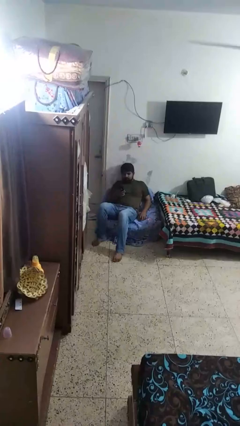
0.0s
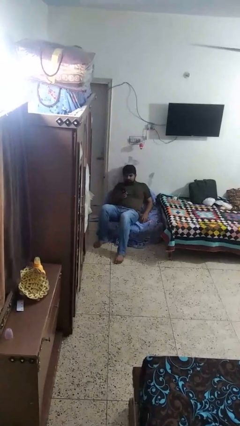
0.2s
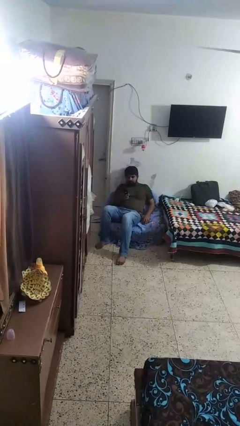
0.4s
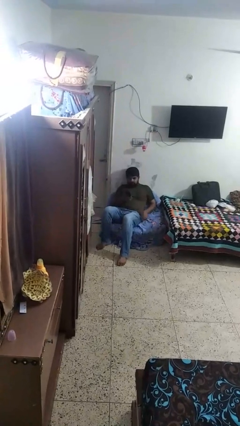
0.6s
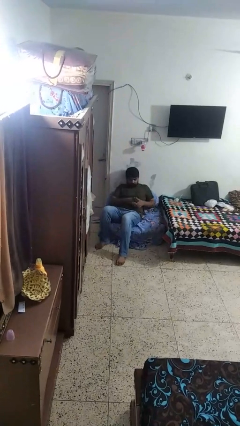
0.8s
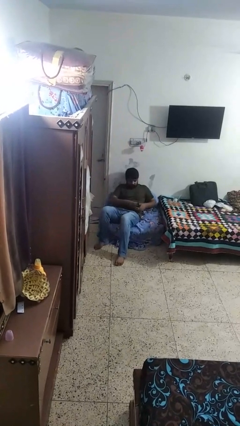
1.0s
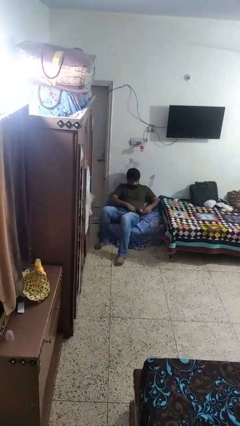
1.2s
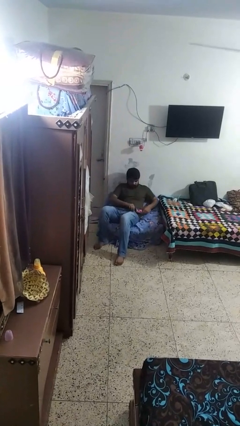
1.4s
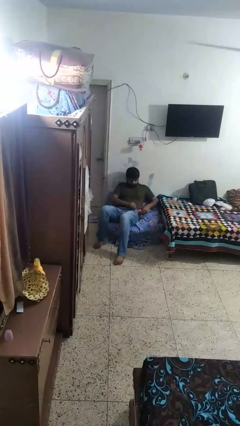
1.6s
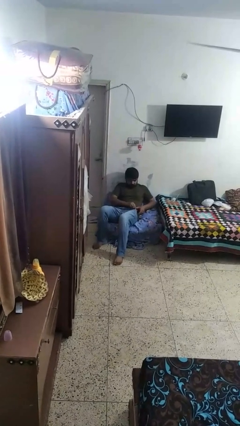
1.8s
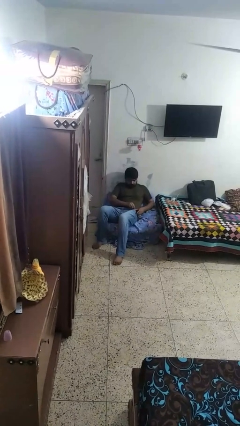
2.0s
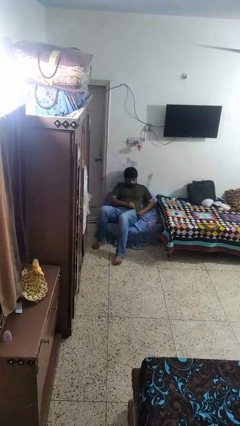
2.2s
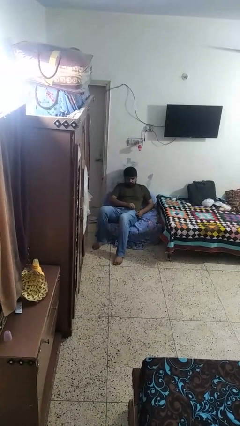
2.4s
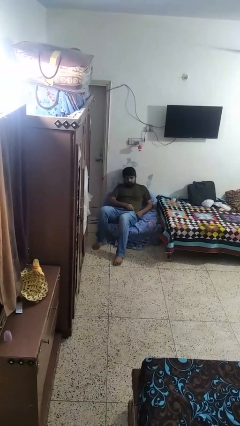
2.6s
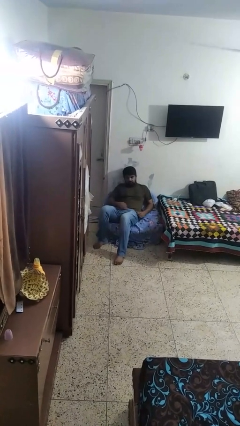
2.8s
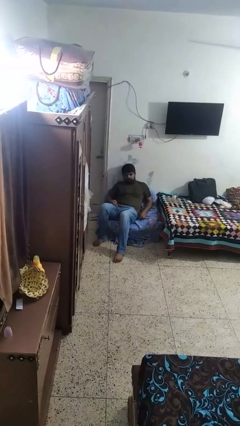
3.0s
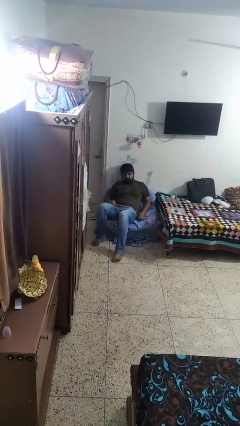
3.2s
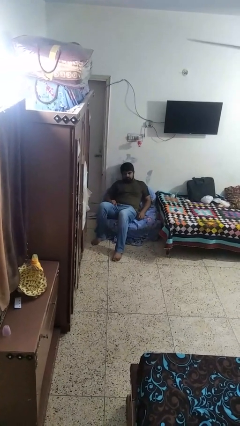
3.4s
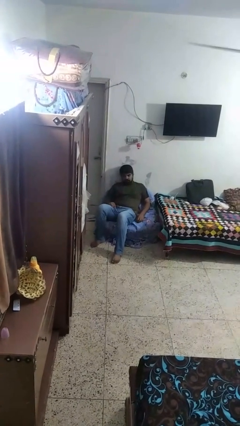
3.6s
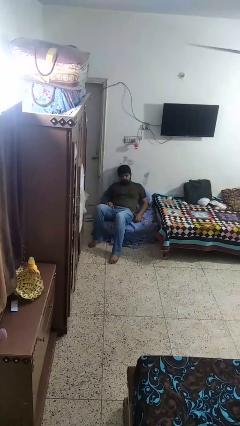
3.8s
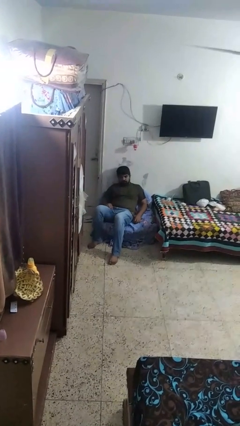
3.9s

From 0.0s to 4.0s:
person puts phone into pocket

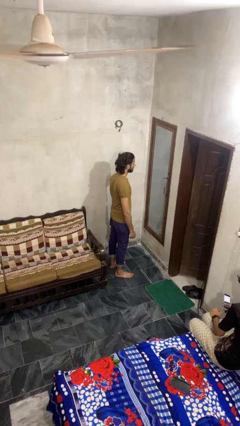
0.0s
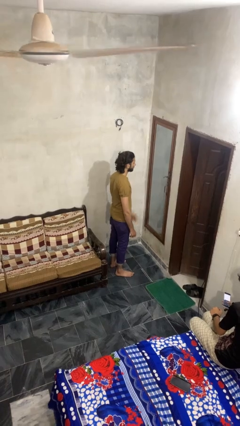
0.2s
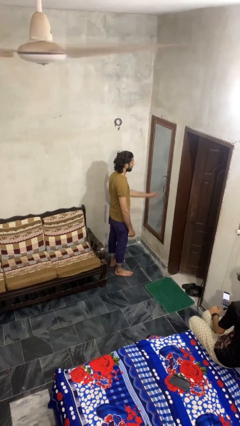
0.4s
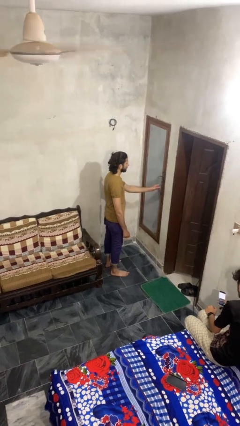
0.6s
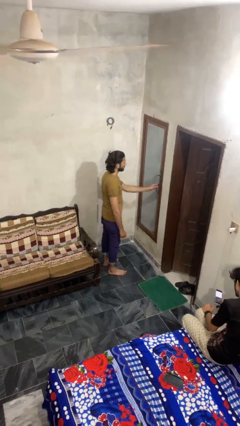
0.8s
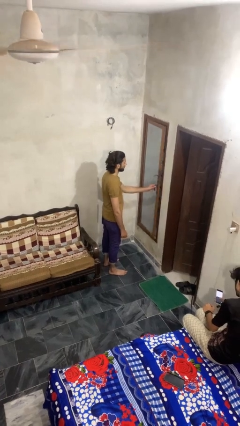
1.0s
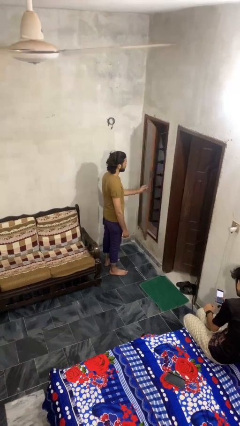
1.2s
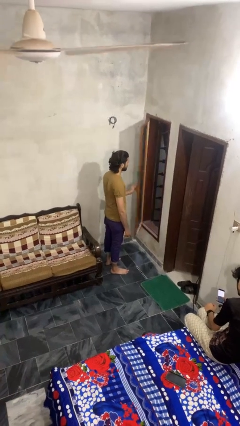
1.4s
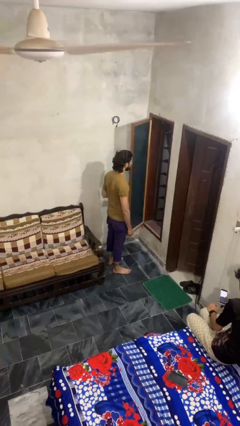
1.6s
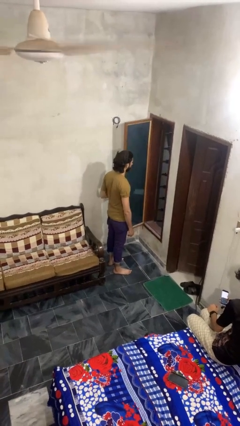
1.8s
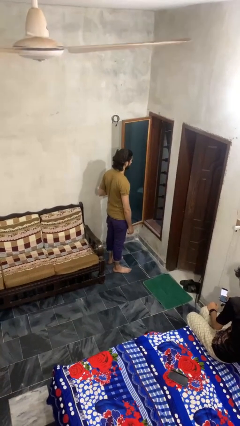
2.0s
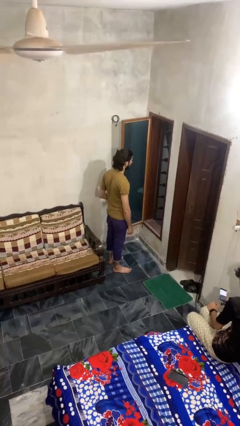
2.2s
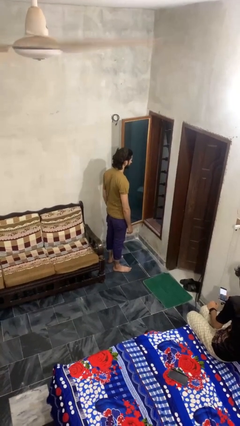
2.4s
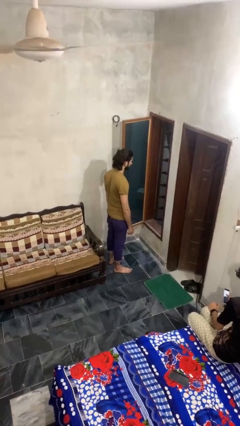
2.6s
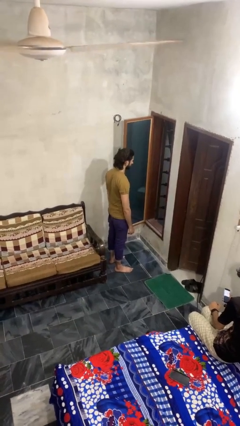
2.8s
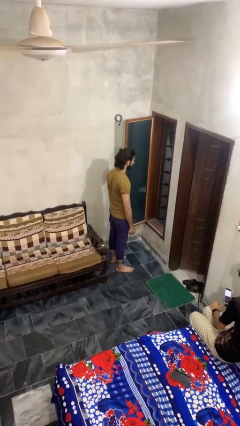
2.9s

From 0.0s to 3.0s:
person opens home window

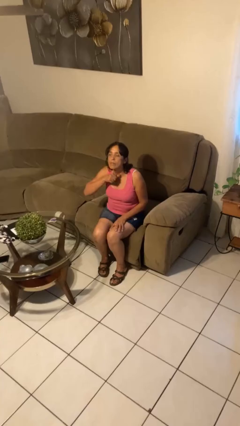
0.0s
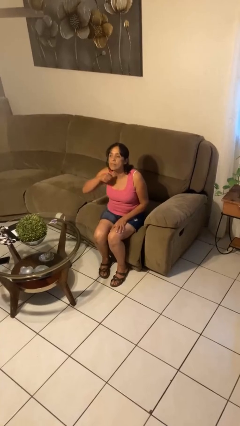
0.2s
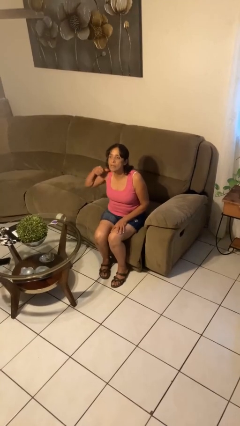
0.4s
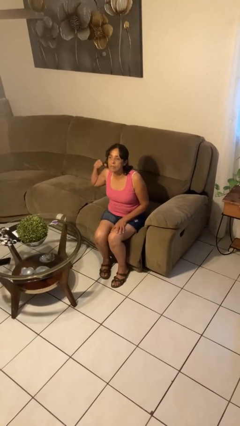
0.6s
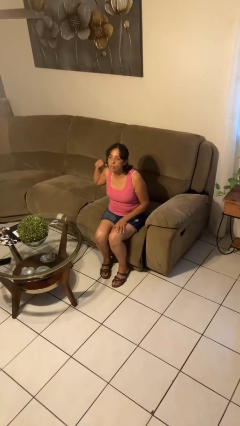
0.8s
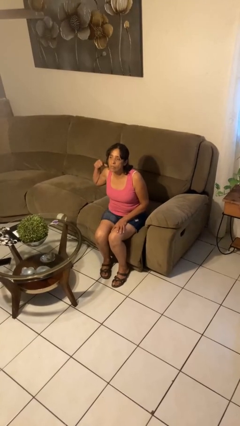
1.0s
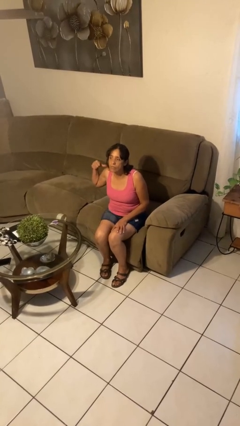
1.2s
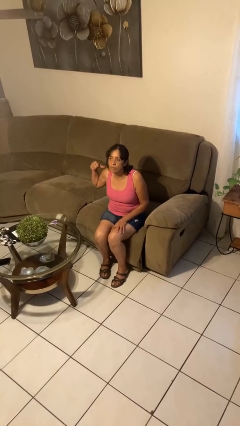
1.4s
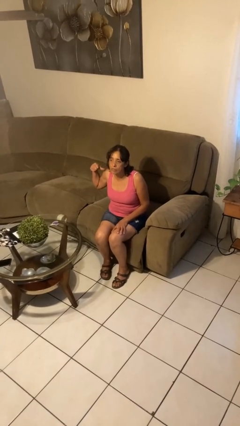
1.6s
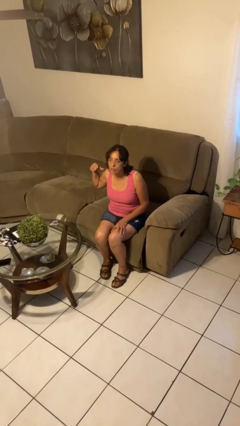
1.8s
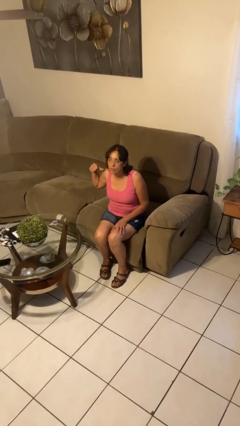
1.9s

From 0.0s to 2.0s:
person gestures cut

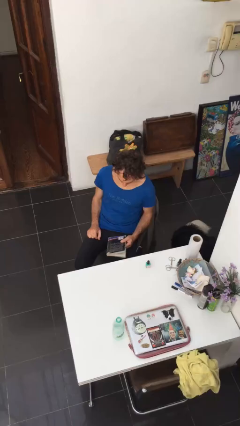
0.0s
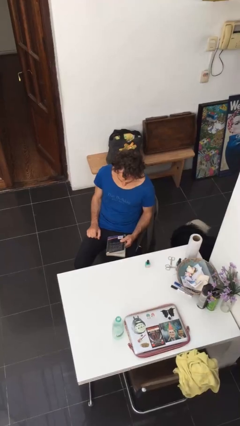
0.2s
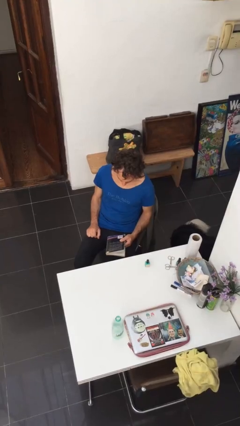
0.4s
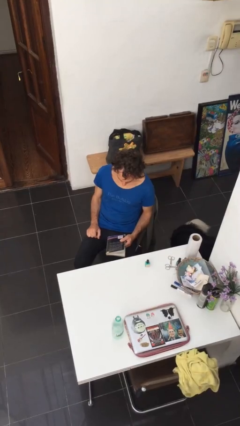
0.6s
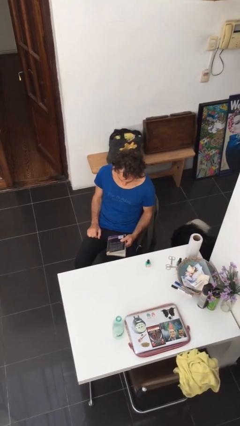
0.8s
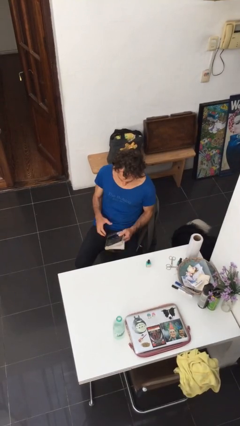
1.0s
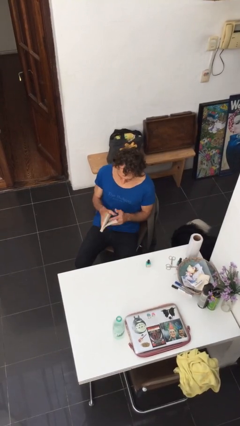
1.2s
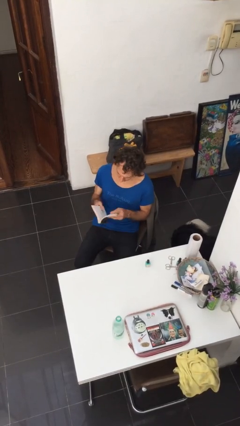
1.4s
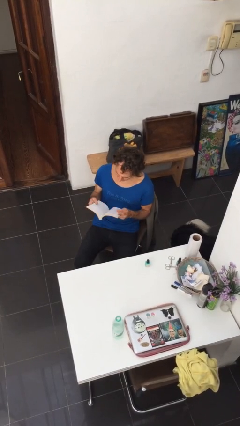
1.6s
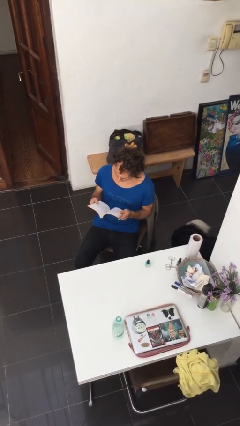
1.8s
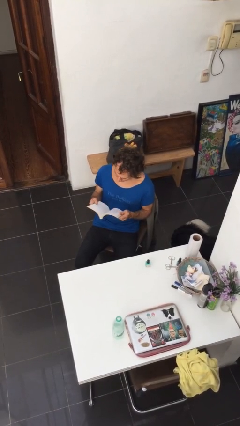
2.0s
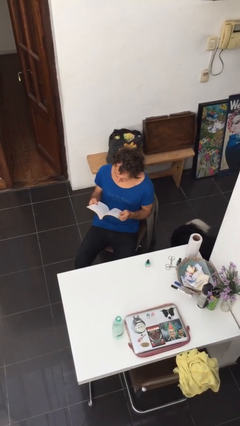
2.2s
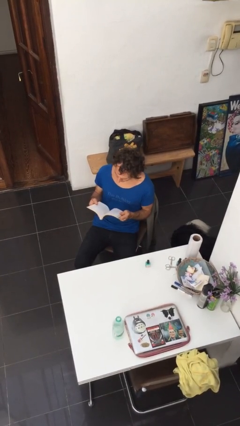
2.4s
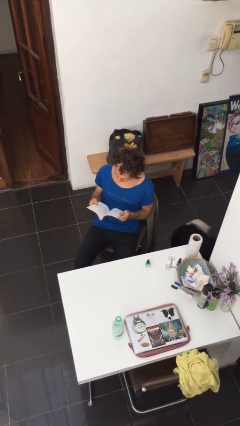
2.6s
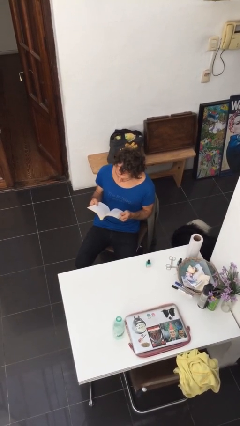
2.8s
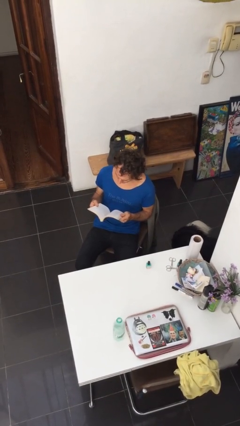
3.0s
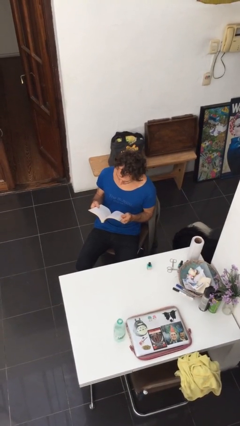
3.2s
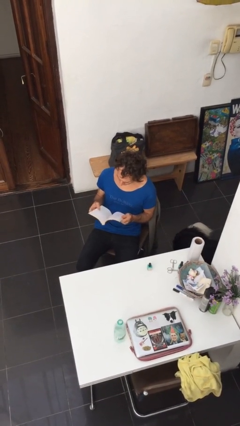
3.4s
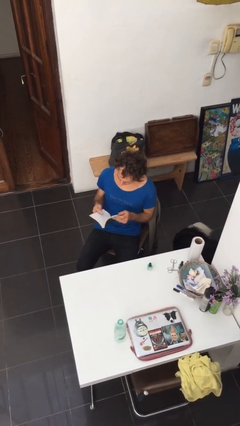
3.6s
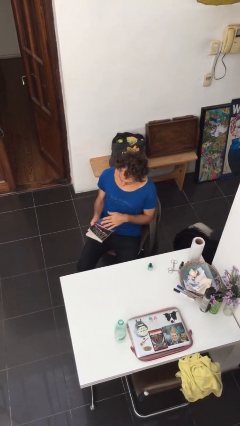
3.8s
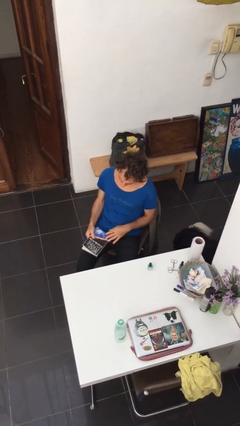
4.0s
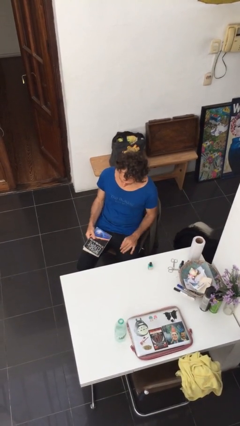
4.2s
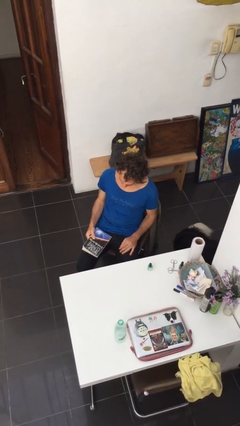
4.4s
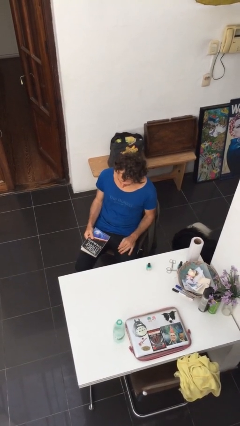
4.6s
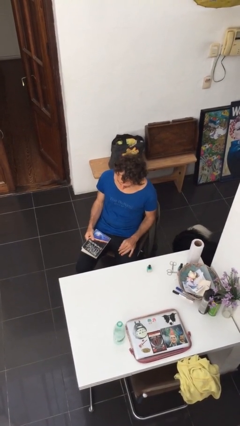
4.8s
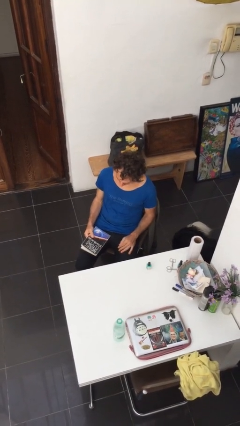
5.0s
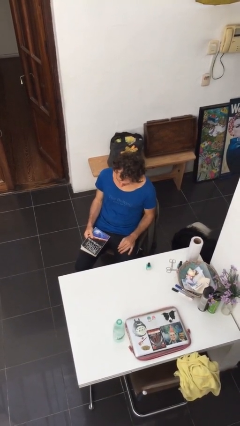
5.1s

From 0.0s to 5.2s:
person reads document

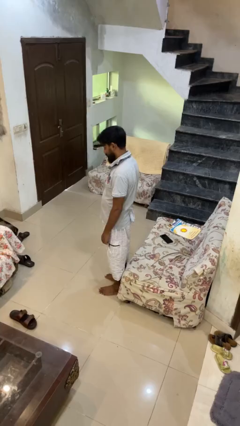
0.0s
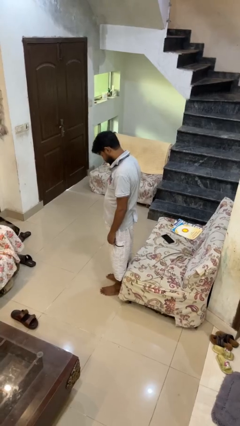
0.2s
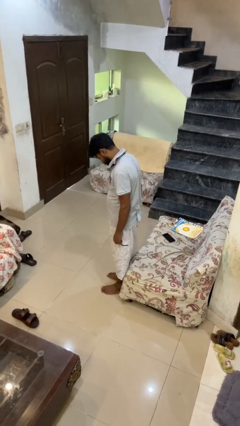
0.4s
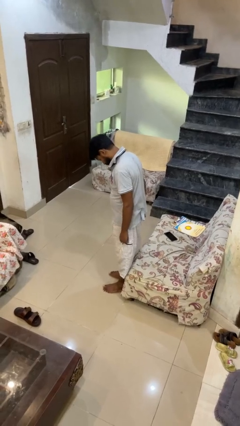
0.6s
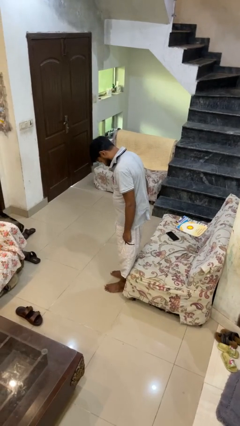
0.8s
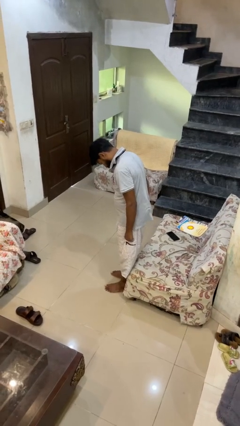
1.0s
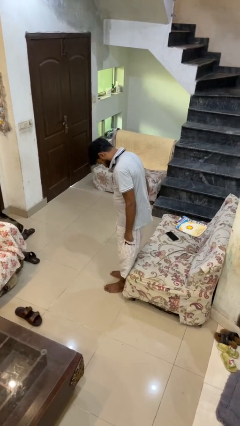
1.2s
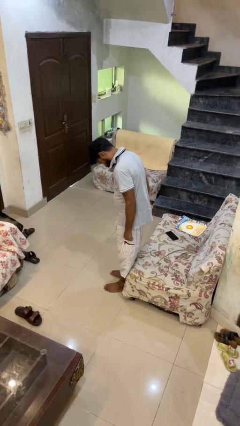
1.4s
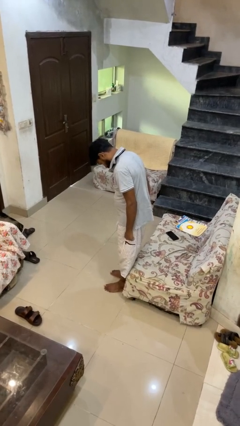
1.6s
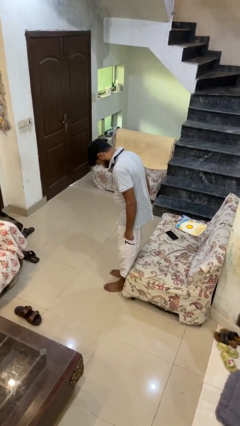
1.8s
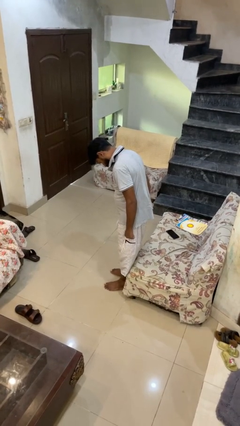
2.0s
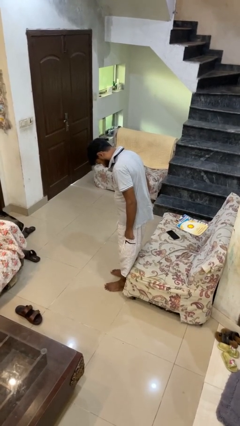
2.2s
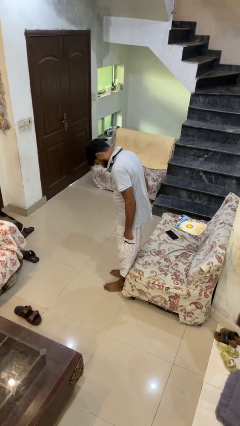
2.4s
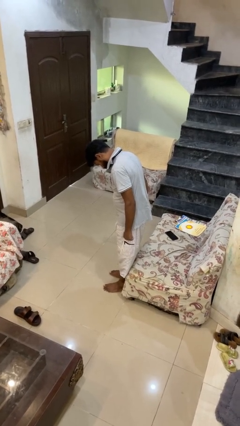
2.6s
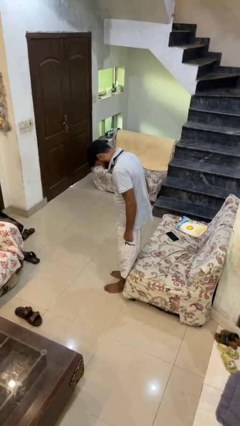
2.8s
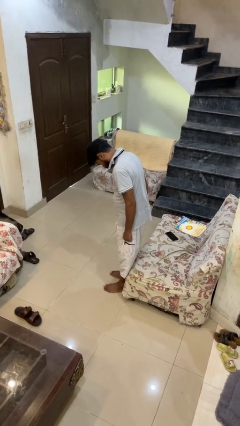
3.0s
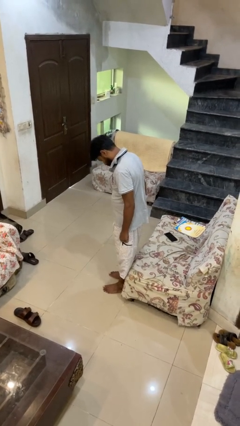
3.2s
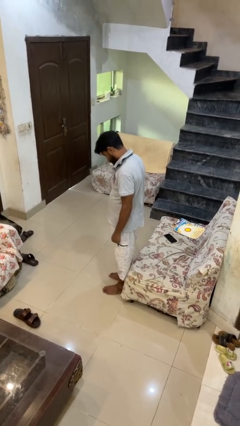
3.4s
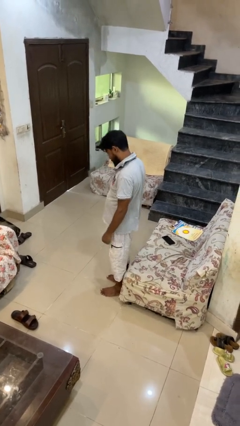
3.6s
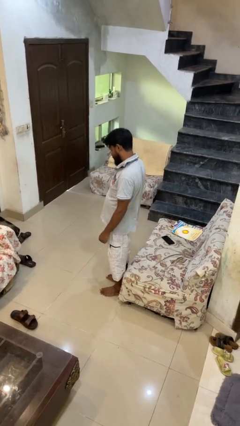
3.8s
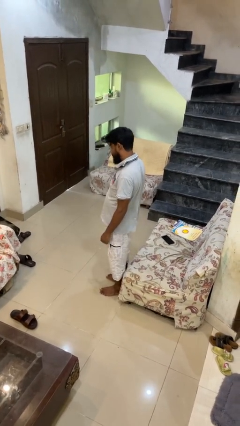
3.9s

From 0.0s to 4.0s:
person bows
